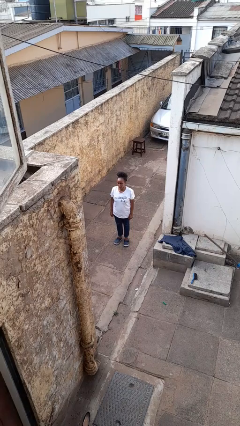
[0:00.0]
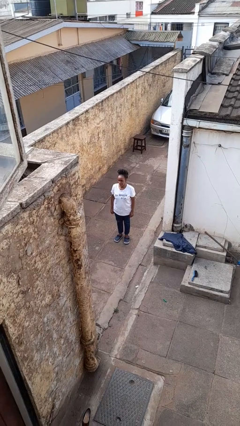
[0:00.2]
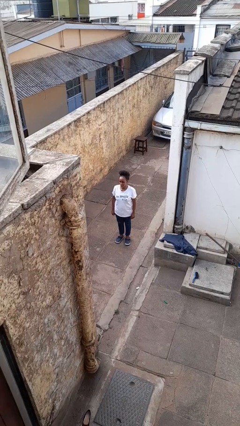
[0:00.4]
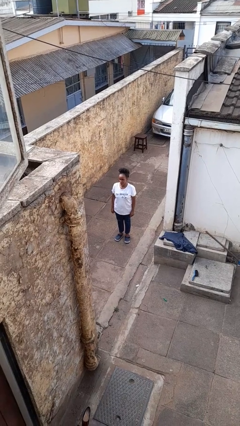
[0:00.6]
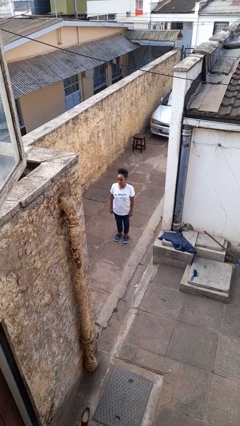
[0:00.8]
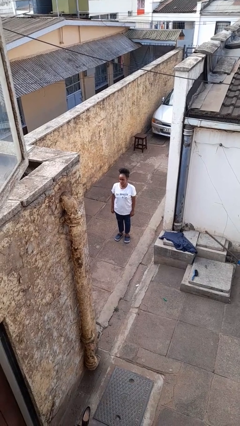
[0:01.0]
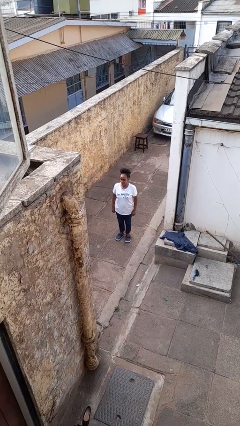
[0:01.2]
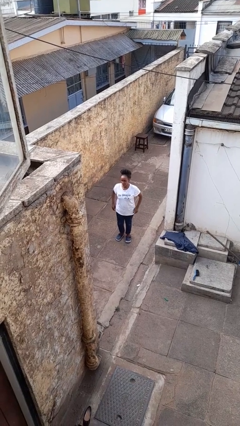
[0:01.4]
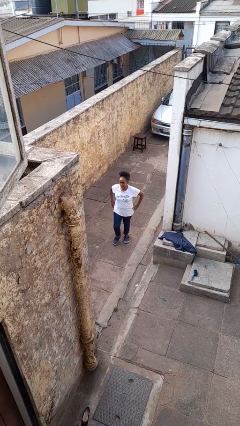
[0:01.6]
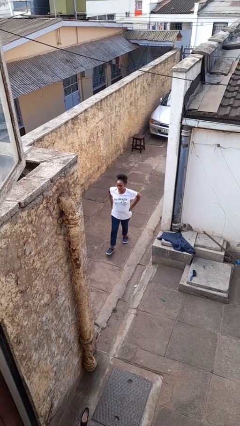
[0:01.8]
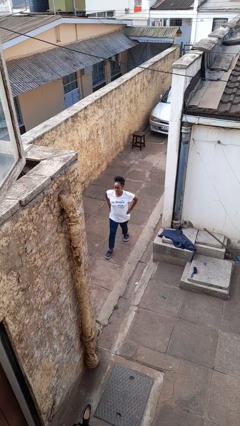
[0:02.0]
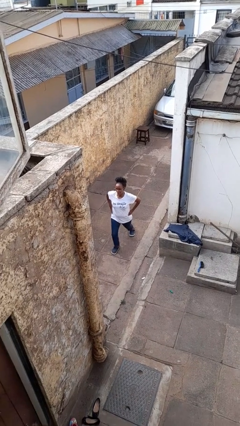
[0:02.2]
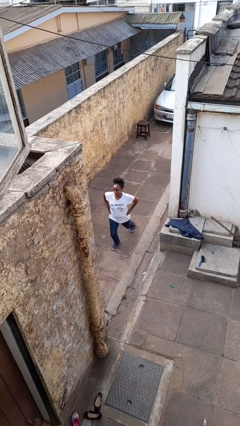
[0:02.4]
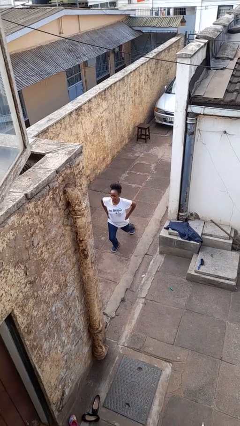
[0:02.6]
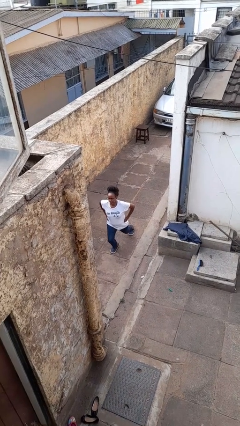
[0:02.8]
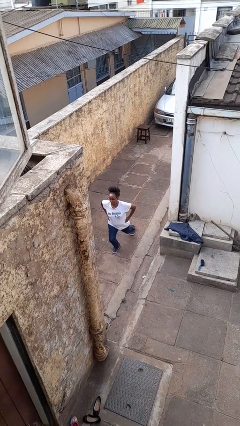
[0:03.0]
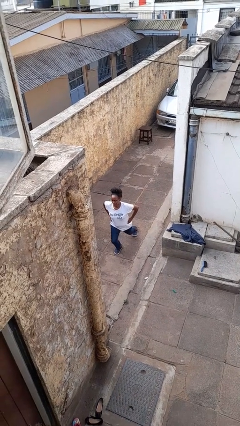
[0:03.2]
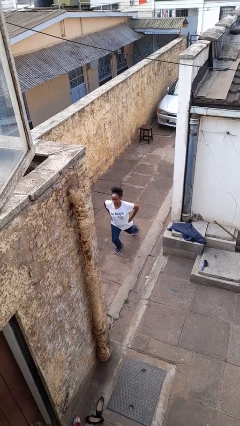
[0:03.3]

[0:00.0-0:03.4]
person exercises with lunges

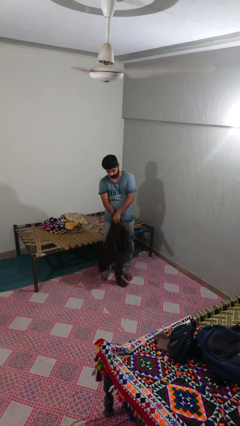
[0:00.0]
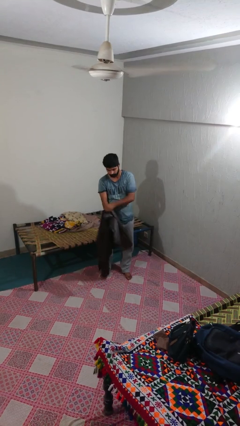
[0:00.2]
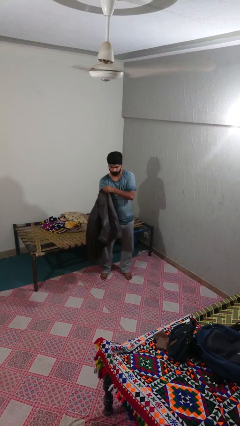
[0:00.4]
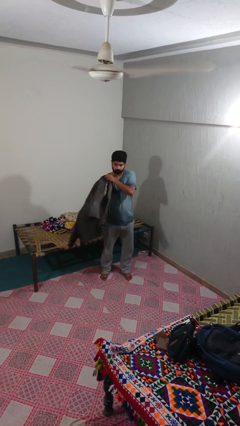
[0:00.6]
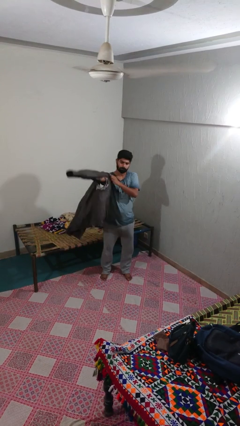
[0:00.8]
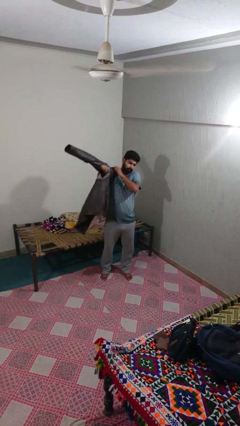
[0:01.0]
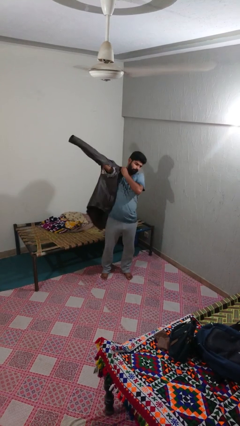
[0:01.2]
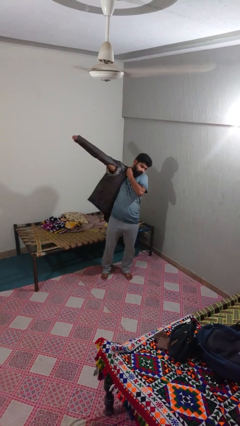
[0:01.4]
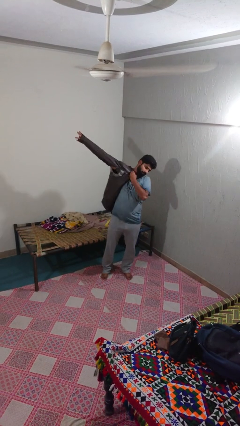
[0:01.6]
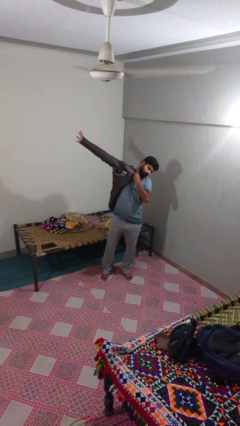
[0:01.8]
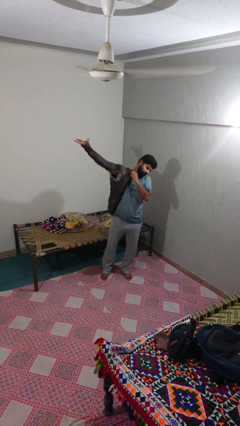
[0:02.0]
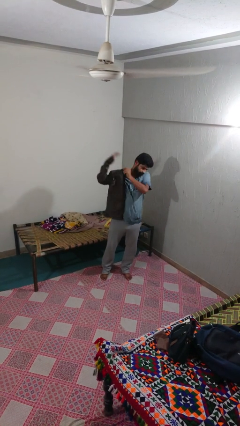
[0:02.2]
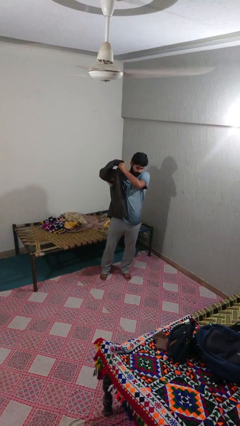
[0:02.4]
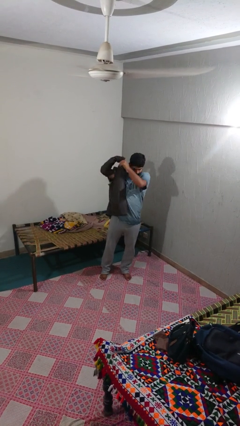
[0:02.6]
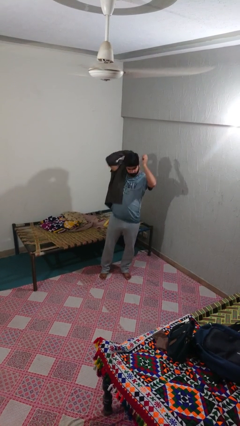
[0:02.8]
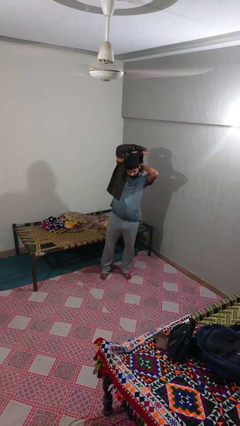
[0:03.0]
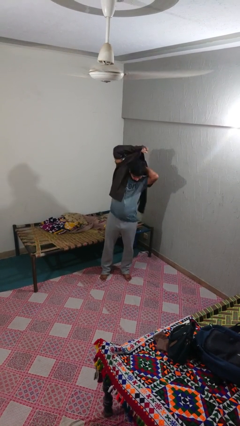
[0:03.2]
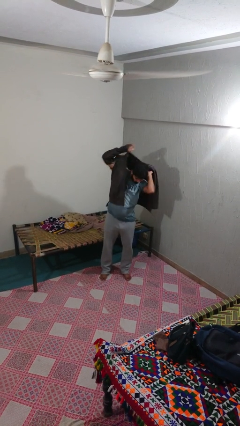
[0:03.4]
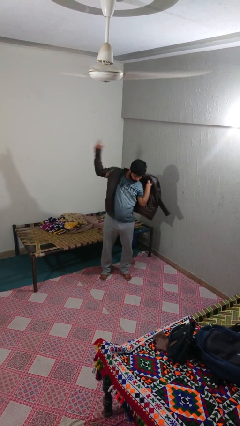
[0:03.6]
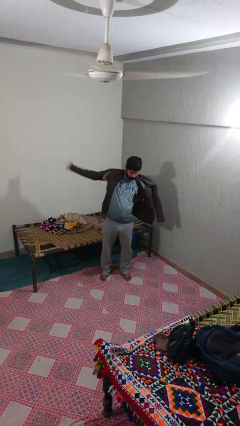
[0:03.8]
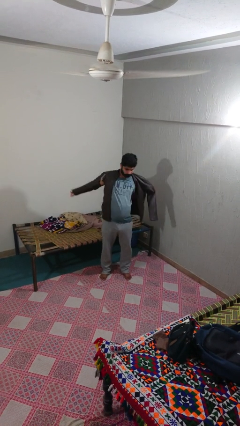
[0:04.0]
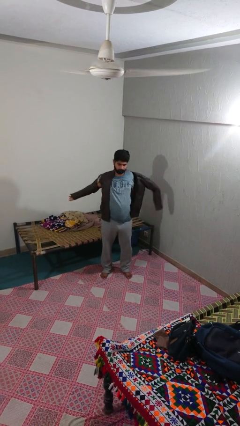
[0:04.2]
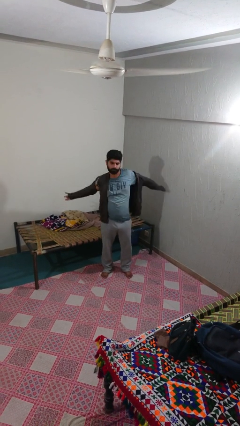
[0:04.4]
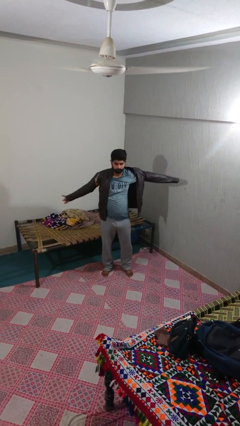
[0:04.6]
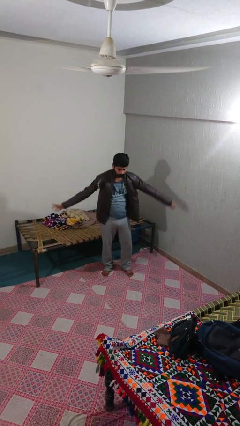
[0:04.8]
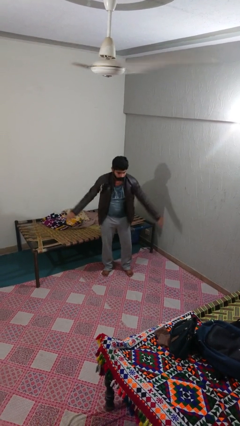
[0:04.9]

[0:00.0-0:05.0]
person puts on jacket

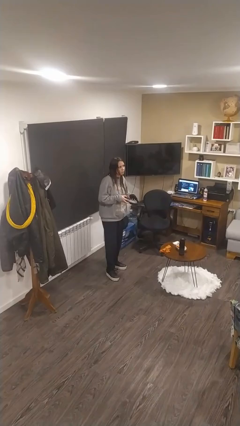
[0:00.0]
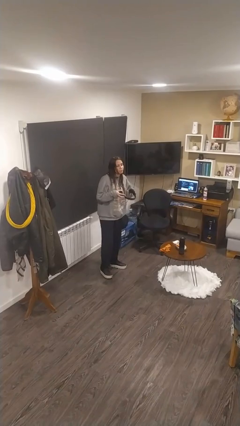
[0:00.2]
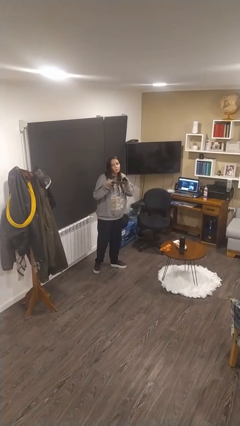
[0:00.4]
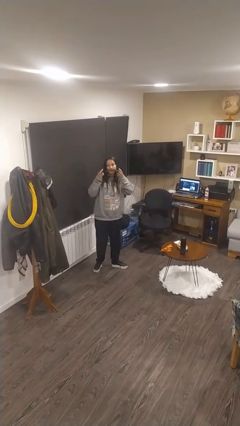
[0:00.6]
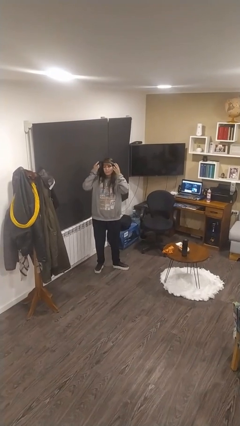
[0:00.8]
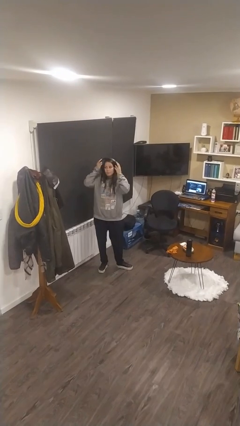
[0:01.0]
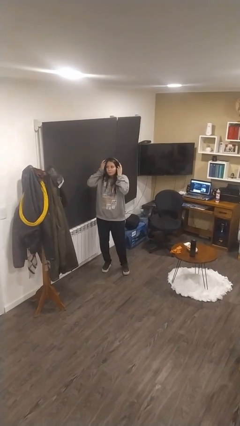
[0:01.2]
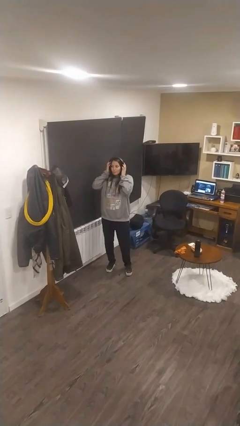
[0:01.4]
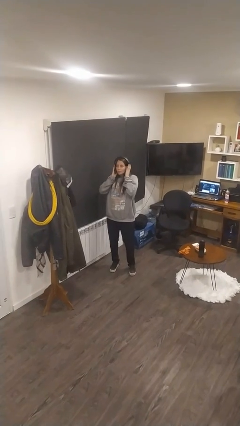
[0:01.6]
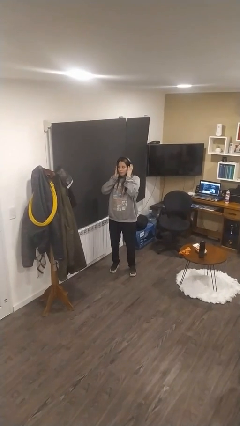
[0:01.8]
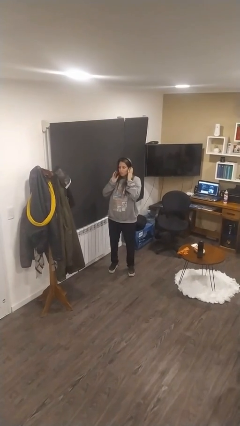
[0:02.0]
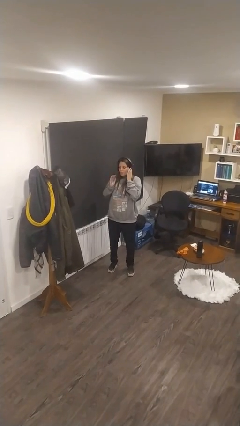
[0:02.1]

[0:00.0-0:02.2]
person puts on headphones

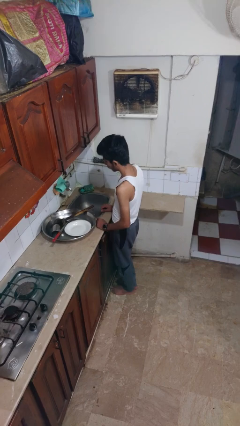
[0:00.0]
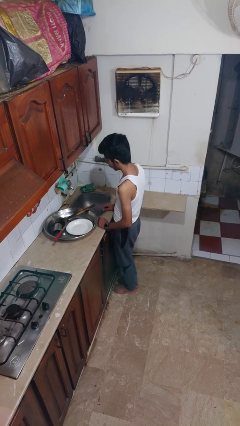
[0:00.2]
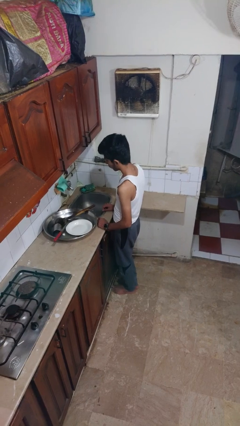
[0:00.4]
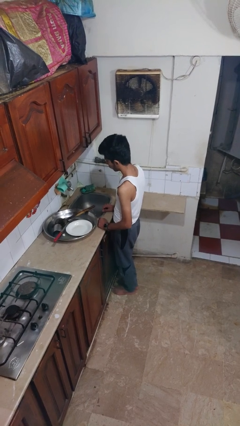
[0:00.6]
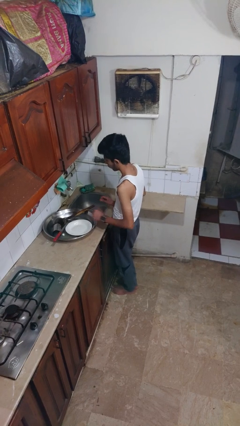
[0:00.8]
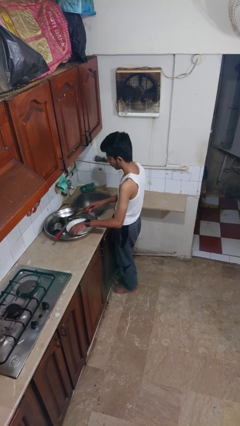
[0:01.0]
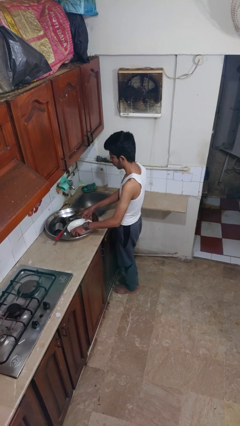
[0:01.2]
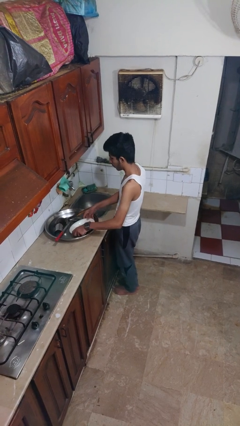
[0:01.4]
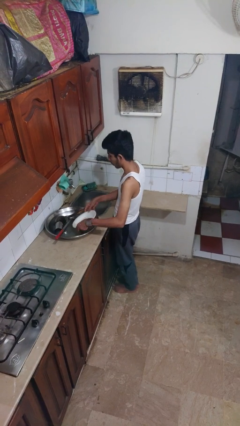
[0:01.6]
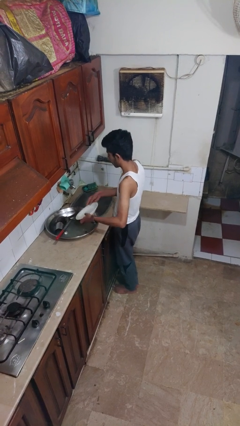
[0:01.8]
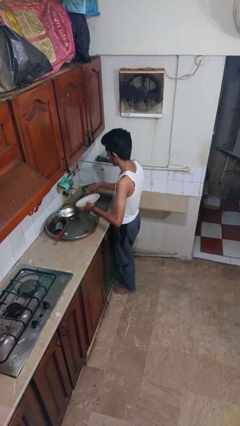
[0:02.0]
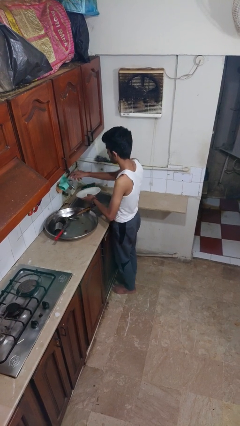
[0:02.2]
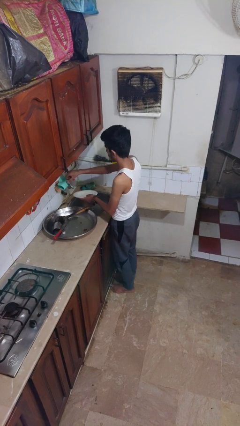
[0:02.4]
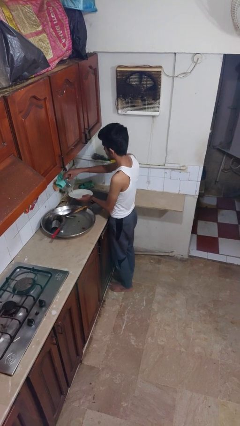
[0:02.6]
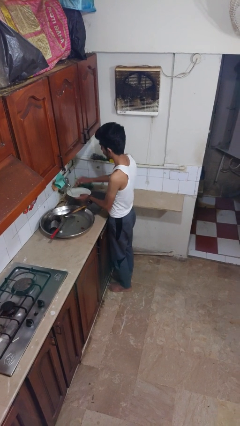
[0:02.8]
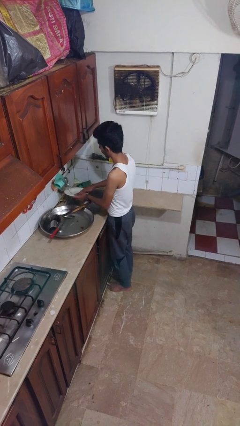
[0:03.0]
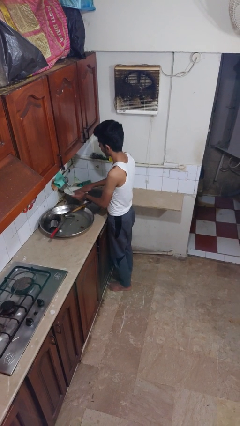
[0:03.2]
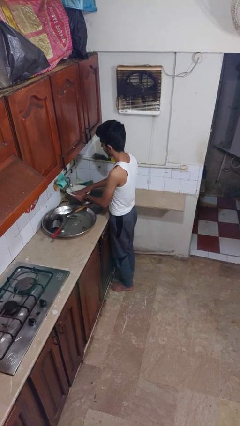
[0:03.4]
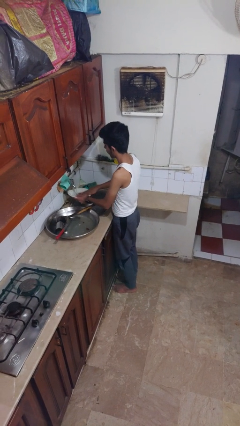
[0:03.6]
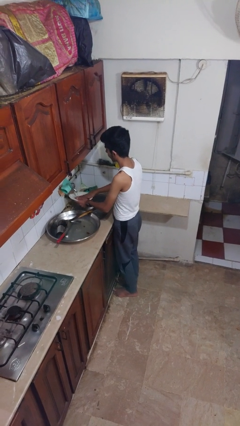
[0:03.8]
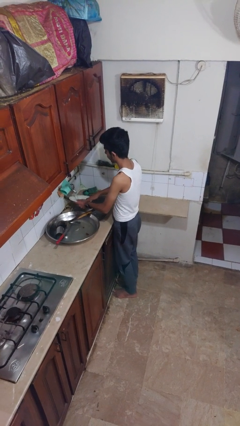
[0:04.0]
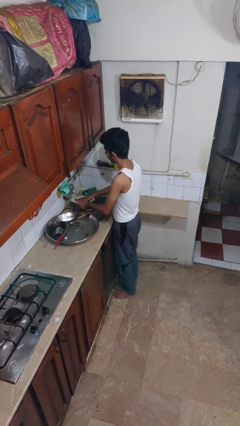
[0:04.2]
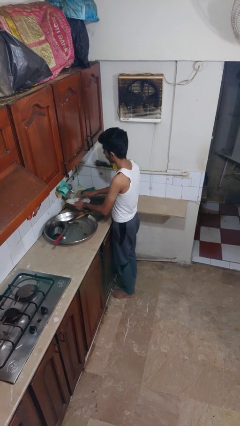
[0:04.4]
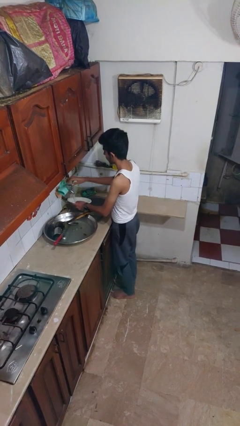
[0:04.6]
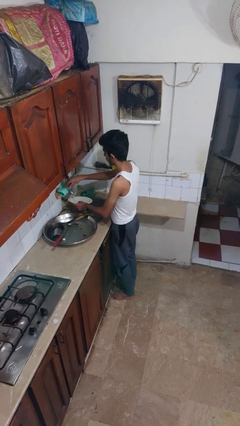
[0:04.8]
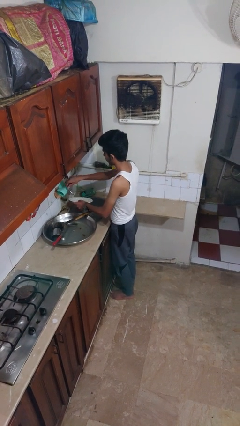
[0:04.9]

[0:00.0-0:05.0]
person washes dish

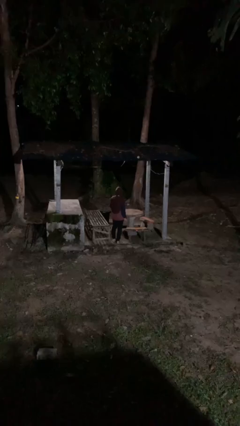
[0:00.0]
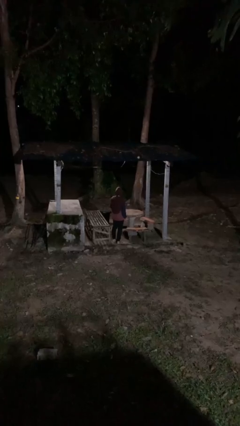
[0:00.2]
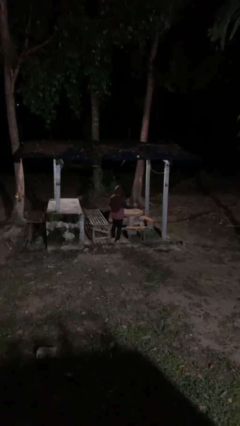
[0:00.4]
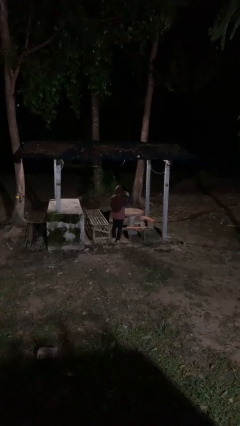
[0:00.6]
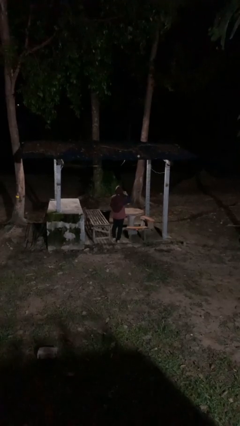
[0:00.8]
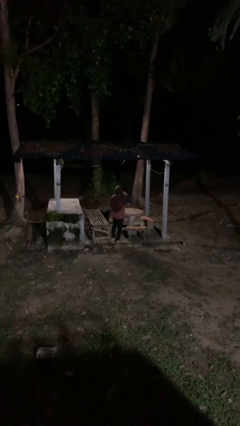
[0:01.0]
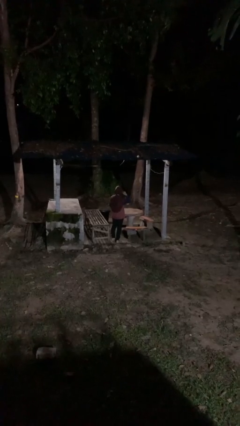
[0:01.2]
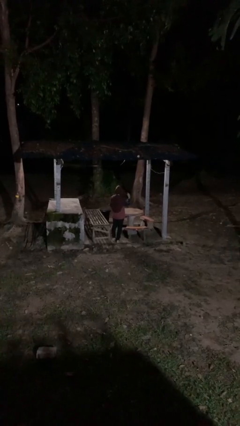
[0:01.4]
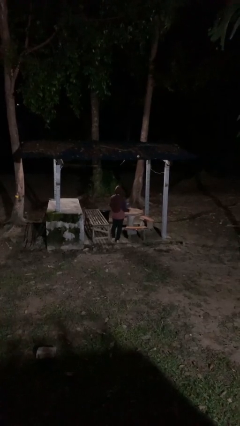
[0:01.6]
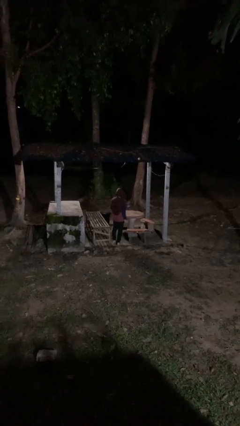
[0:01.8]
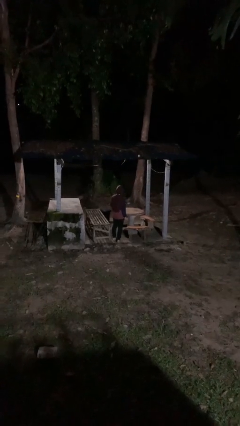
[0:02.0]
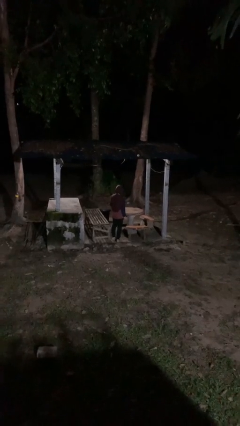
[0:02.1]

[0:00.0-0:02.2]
person gestures listen closely
